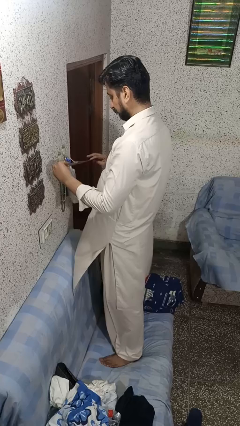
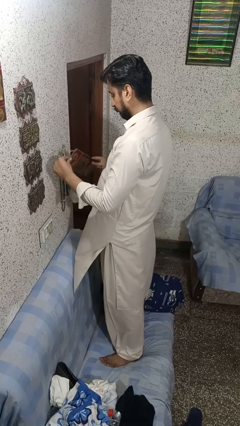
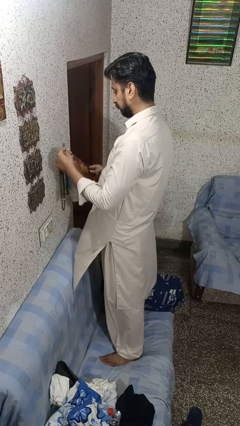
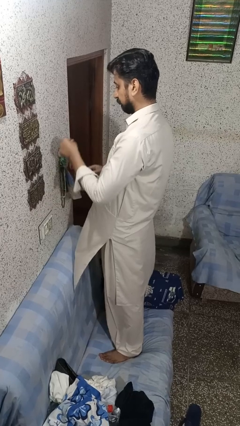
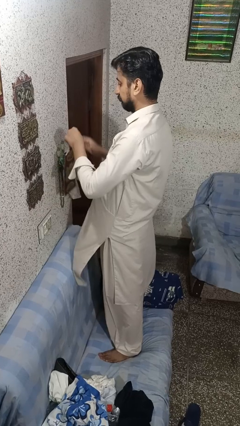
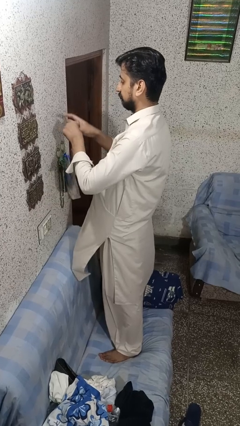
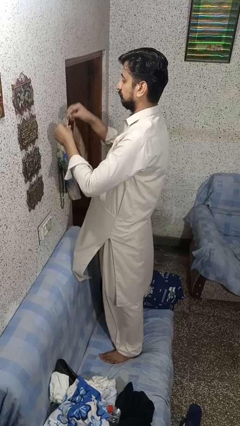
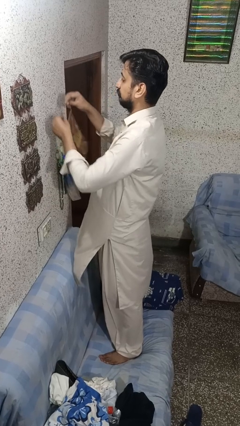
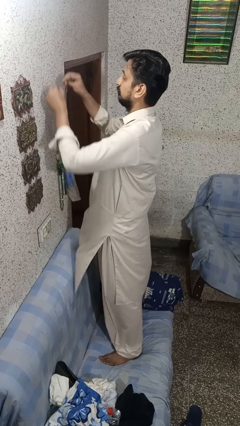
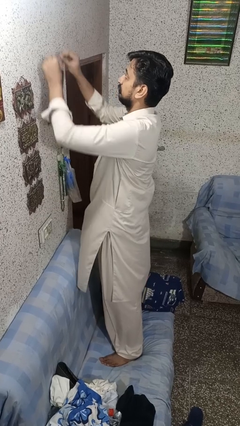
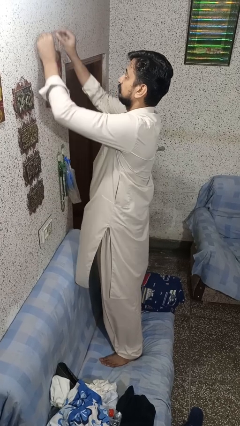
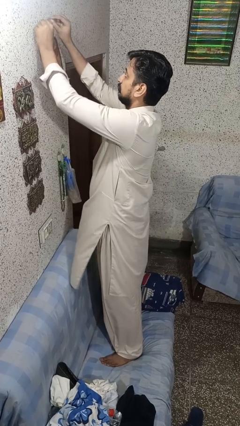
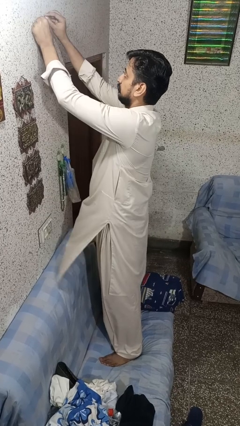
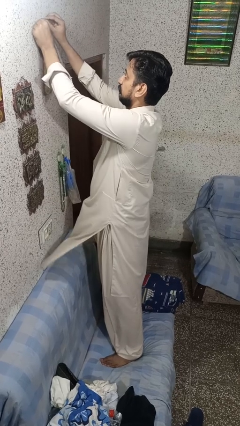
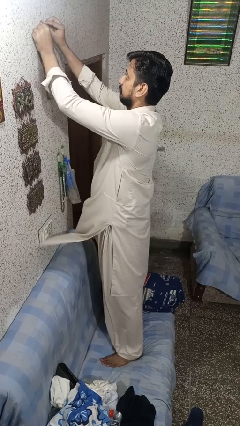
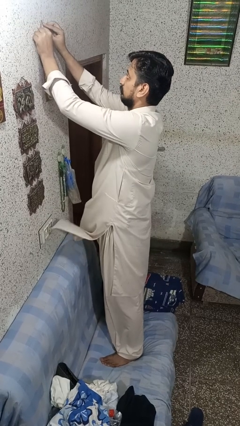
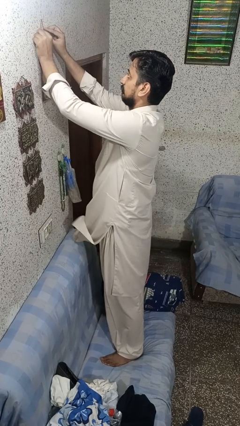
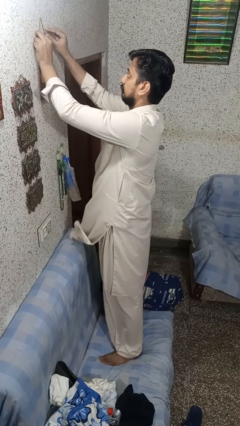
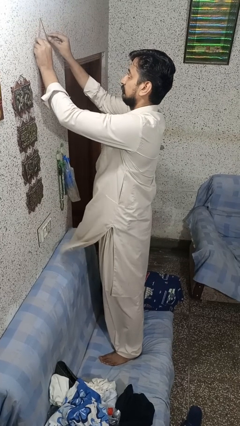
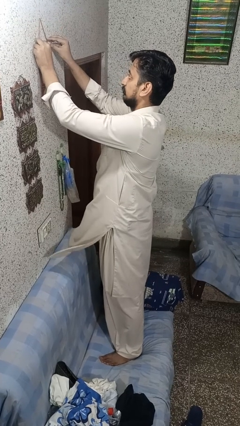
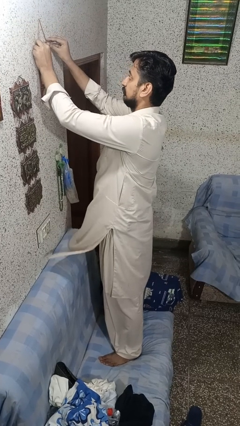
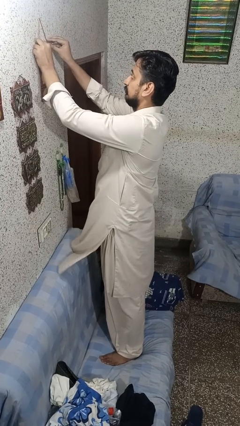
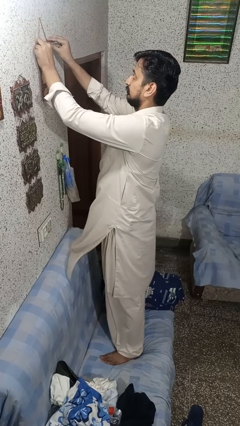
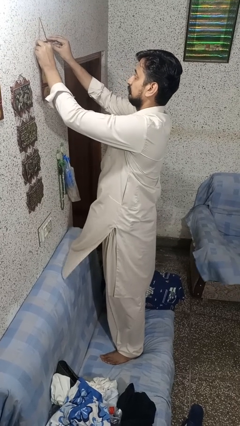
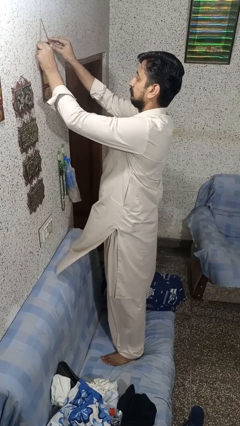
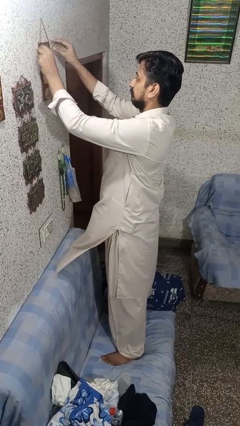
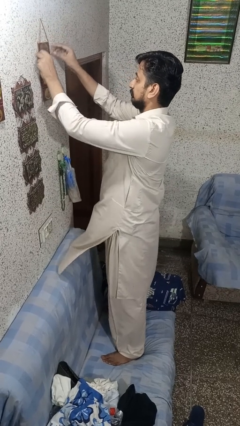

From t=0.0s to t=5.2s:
person puts up picture frame

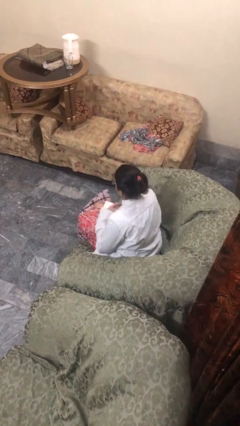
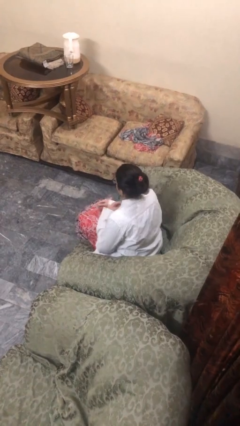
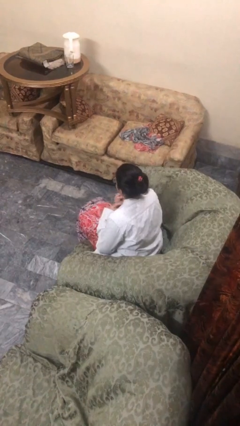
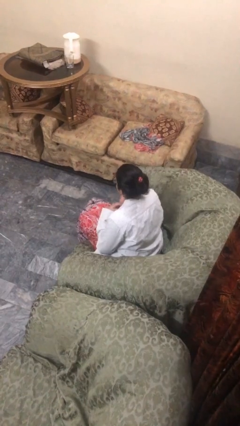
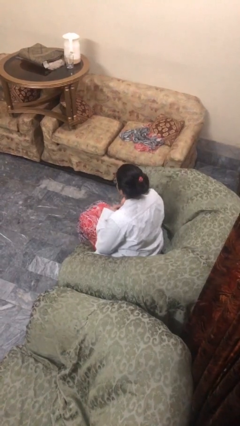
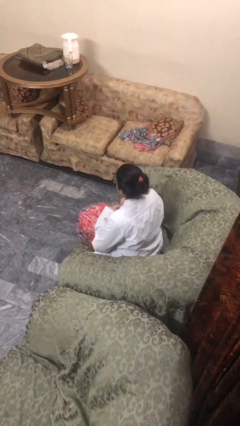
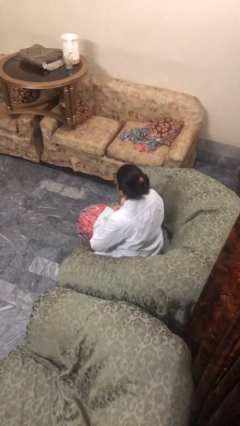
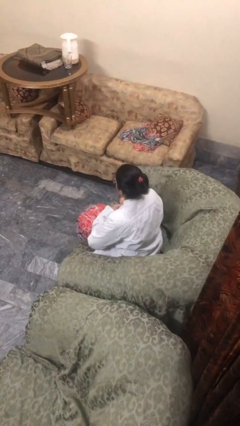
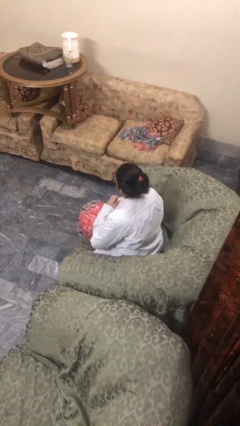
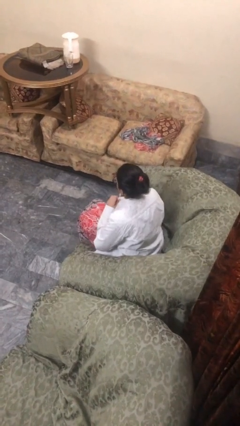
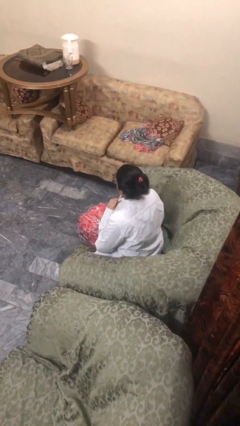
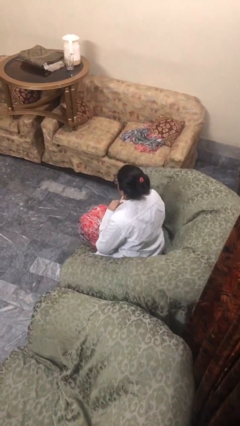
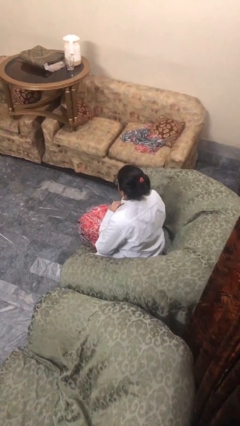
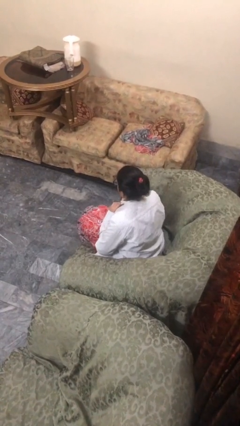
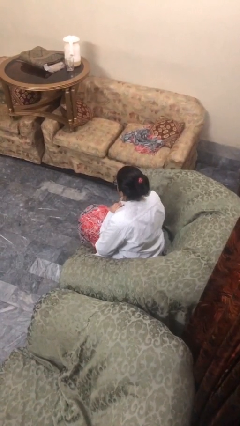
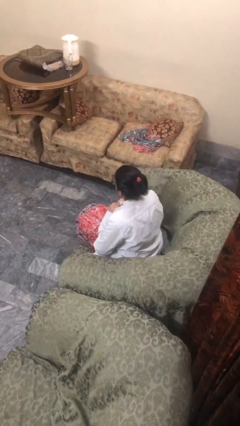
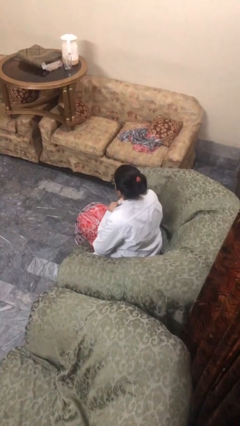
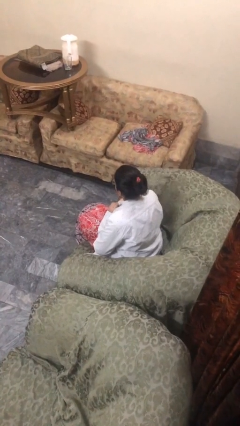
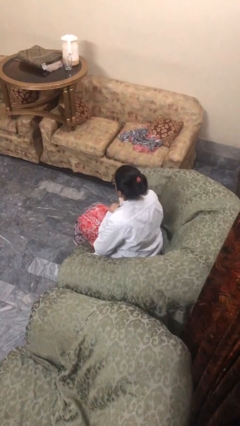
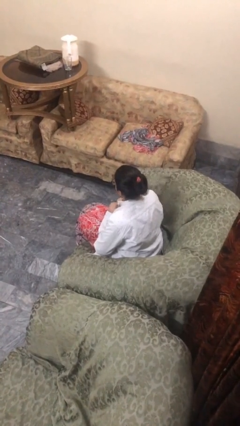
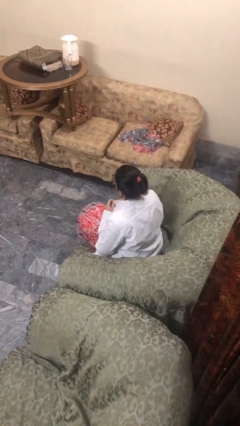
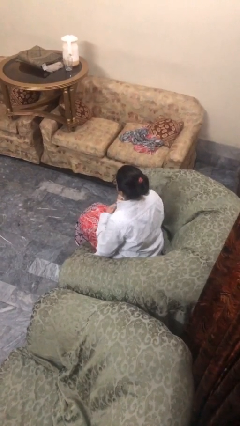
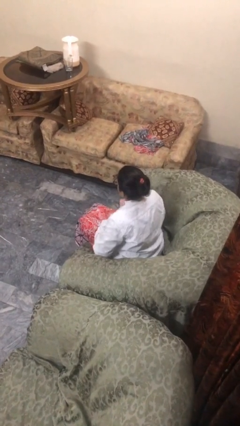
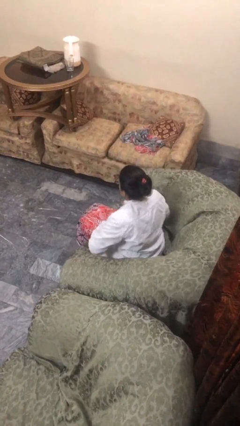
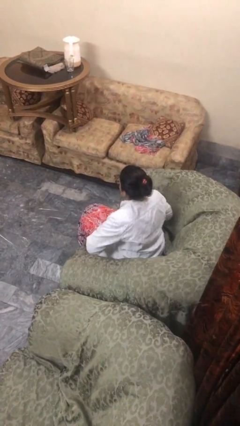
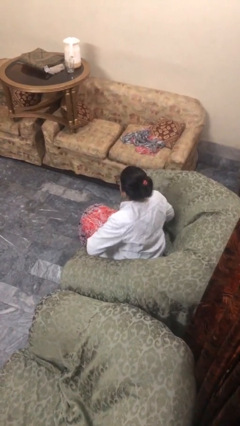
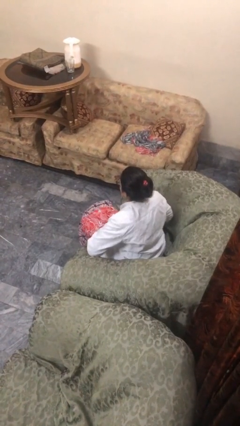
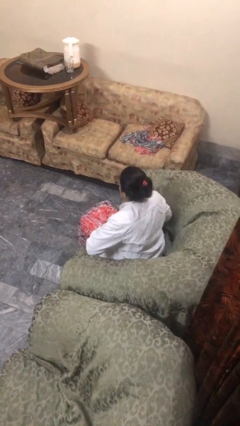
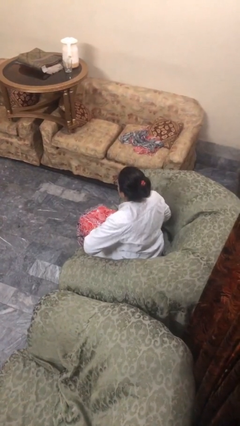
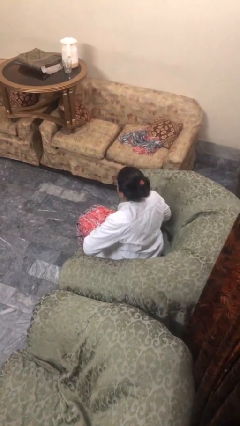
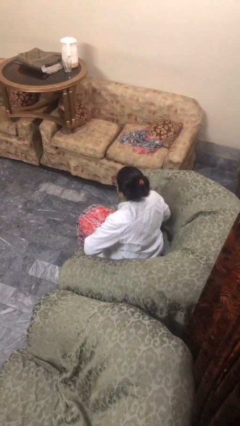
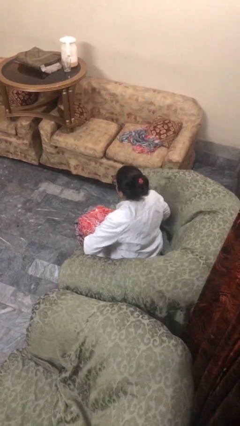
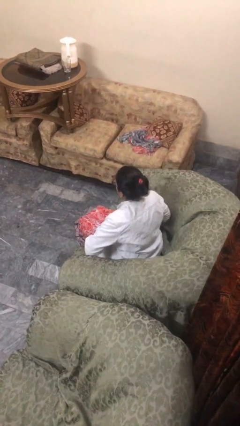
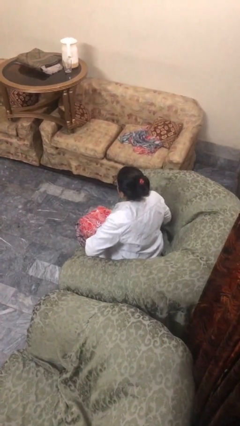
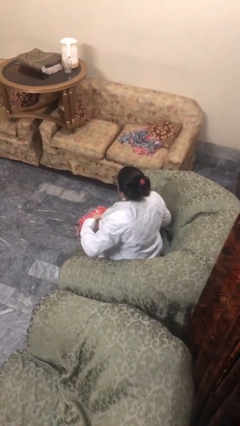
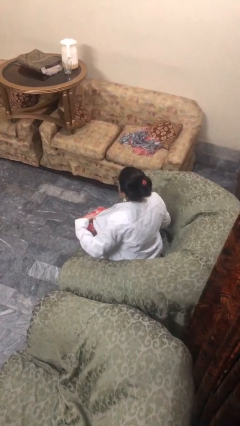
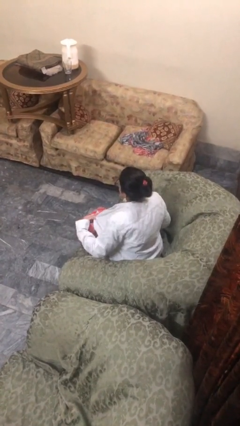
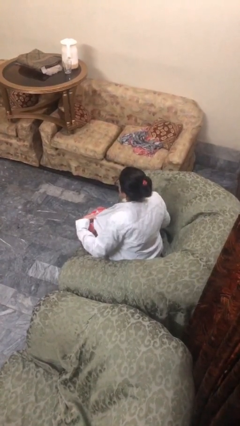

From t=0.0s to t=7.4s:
person unbuttons shirt

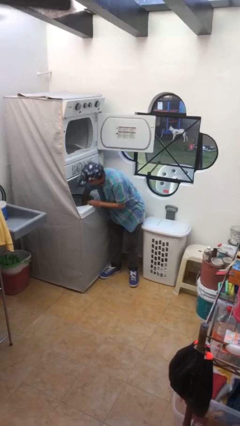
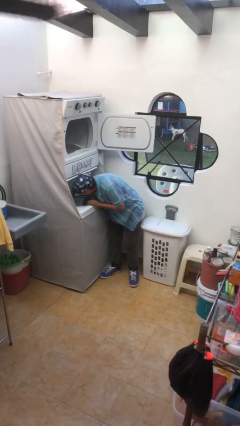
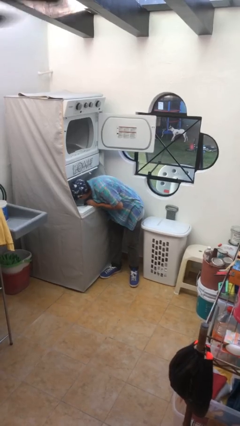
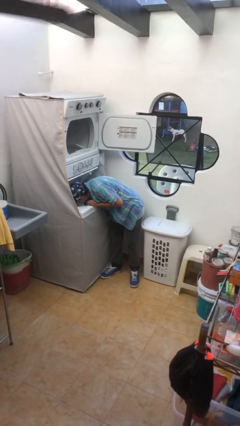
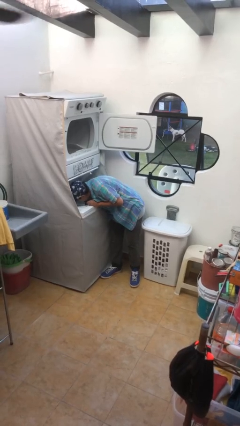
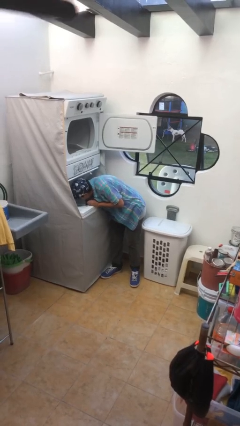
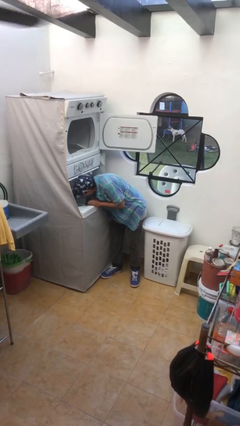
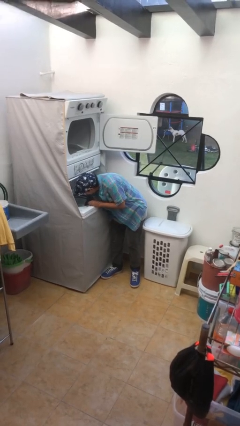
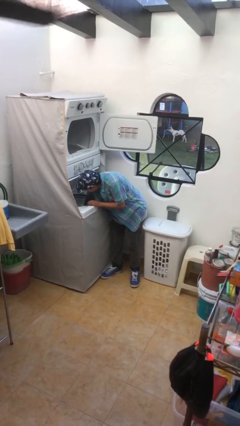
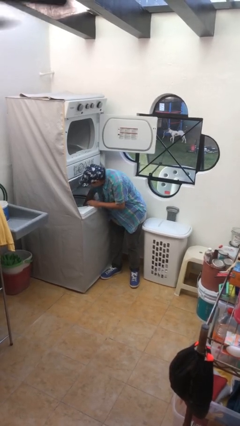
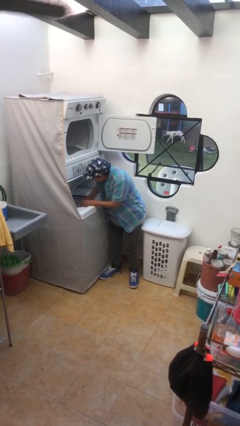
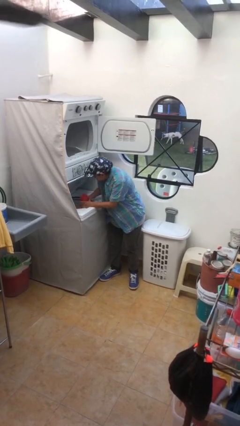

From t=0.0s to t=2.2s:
person unloads clotheswasher

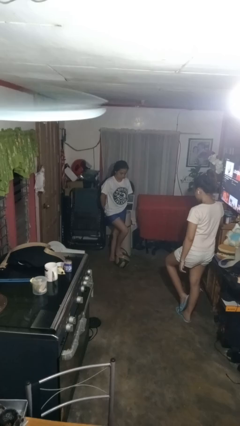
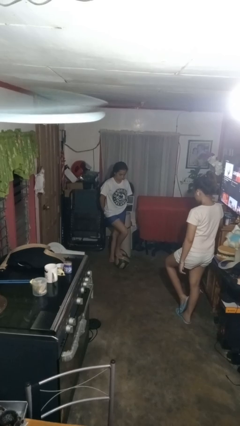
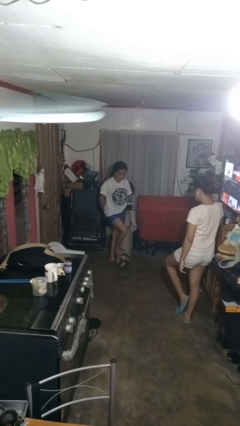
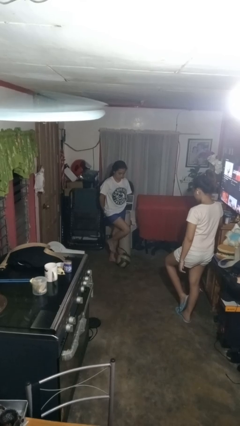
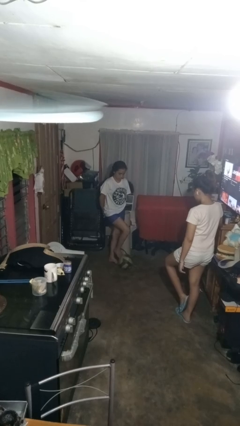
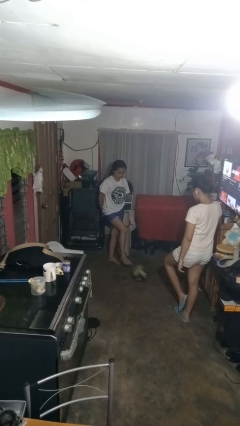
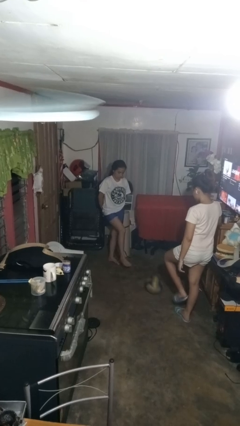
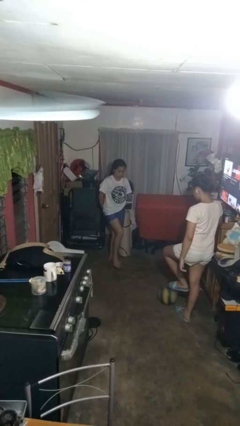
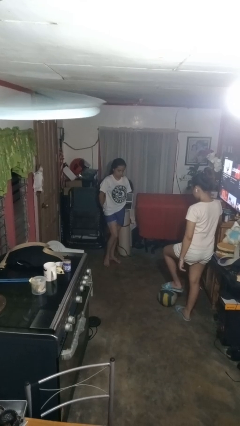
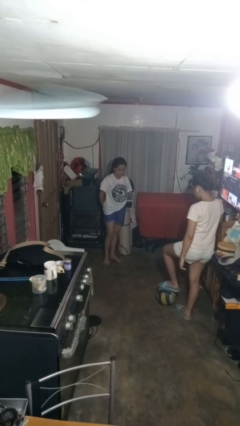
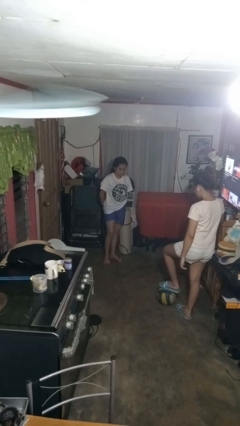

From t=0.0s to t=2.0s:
person kicks object to person

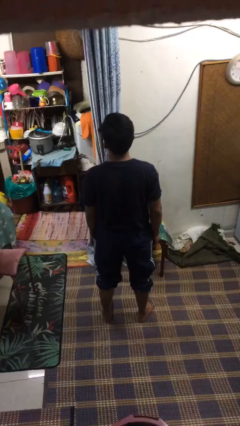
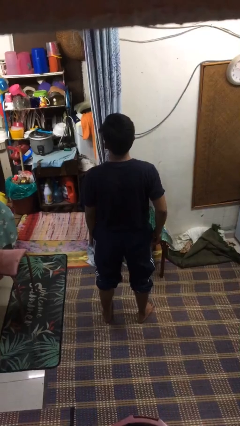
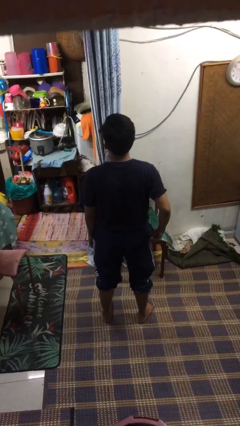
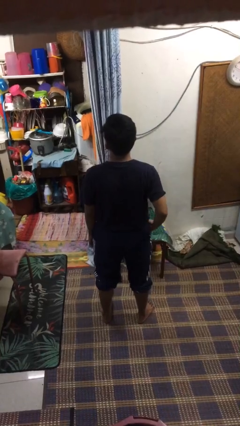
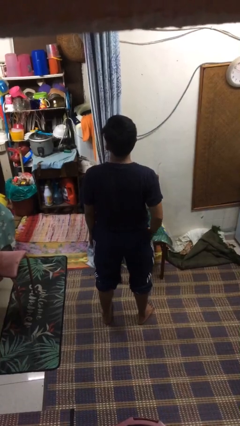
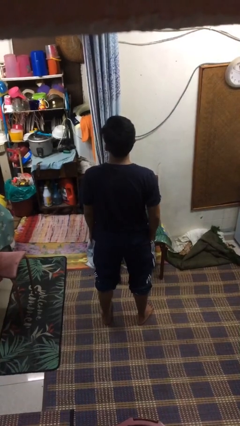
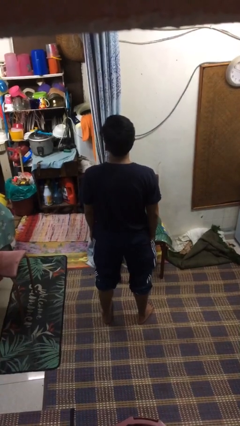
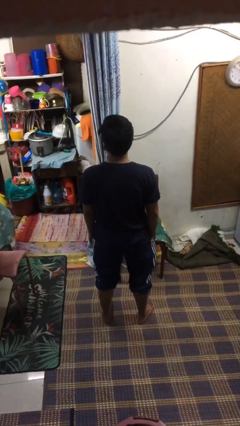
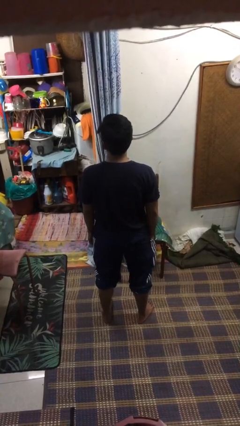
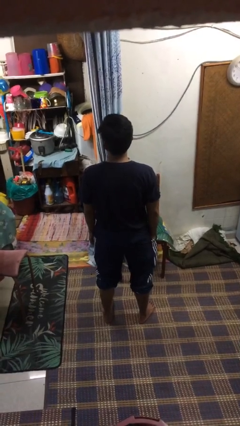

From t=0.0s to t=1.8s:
person puts hands in back pockets
